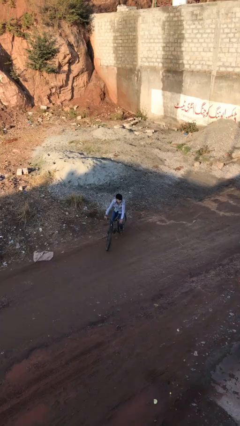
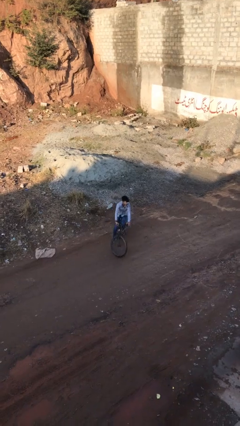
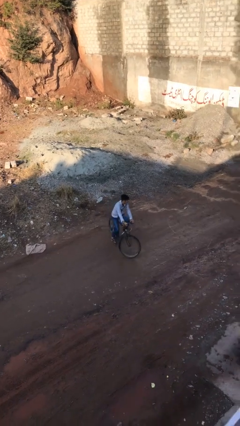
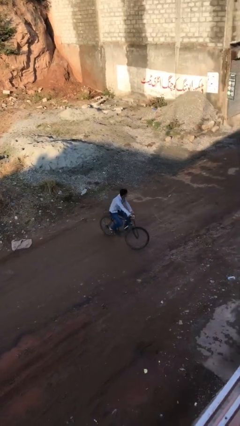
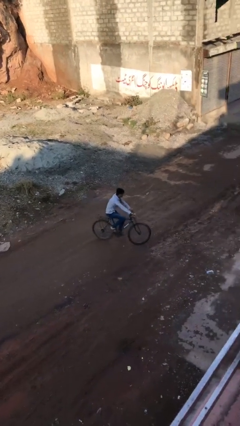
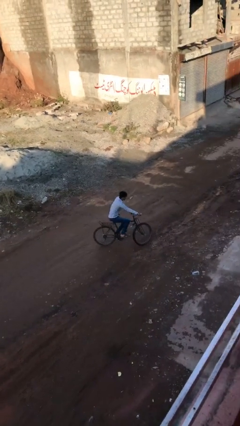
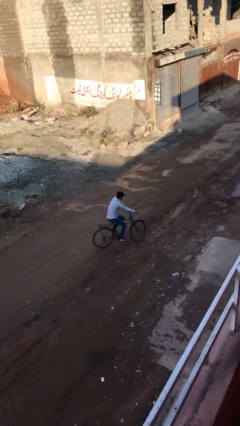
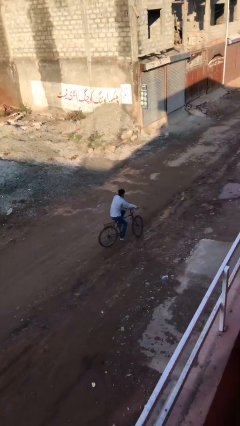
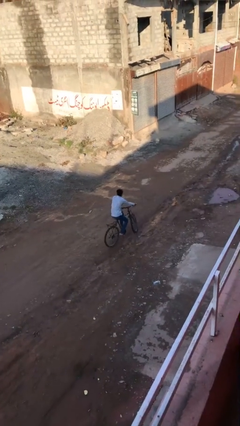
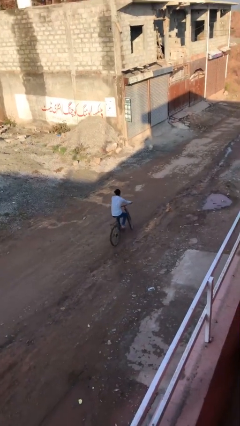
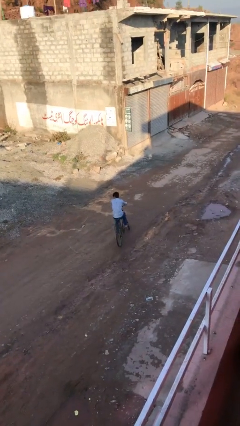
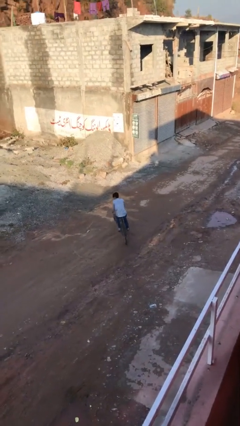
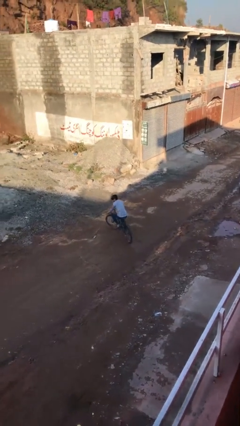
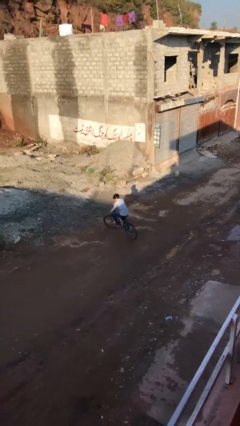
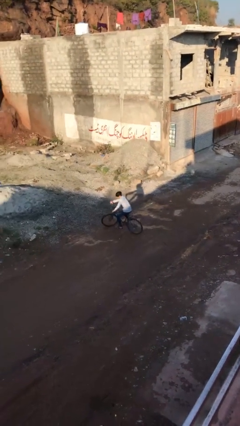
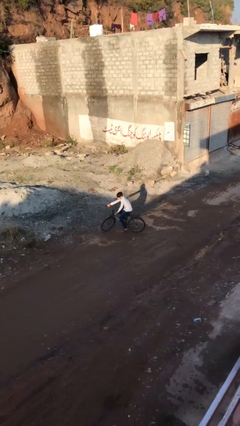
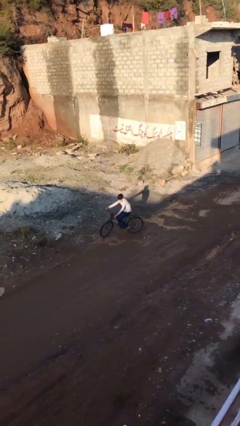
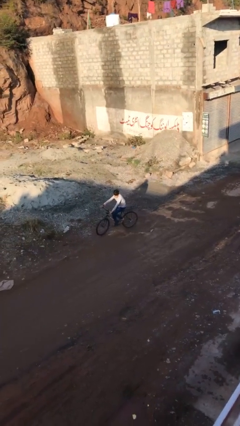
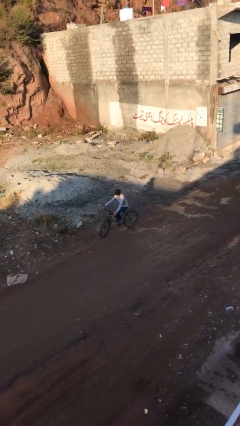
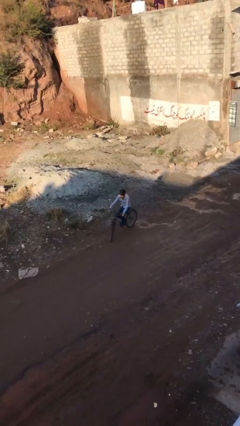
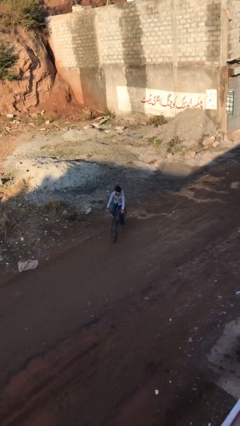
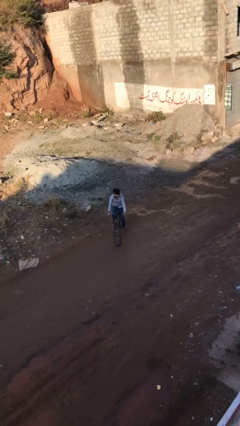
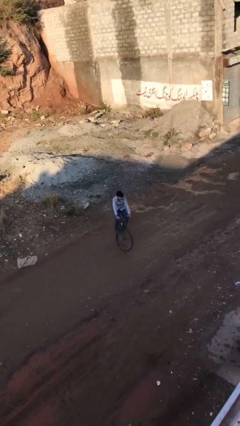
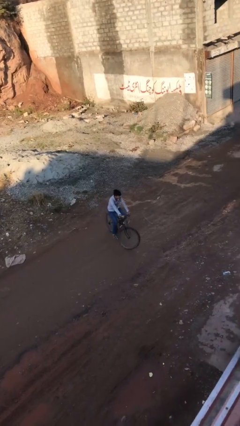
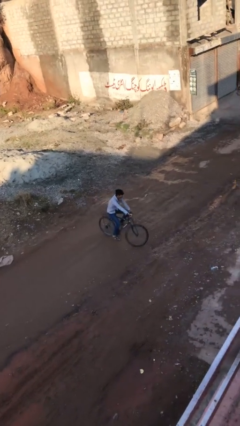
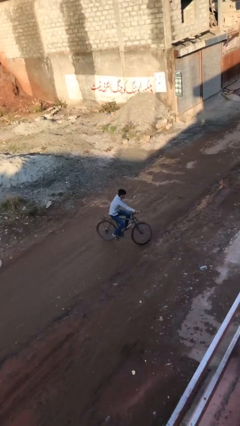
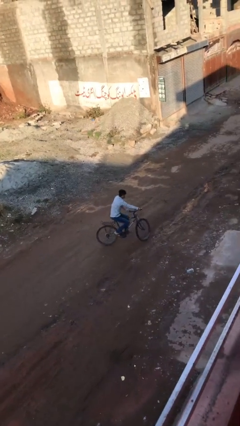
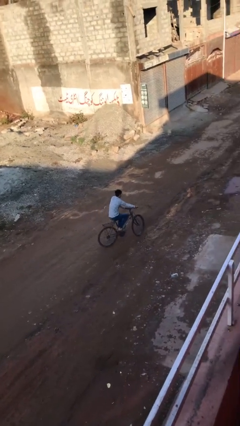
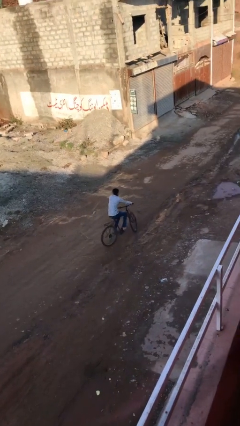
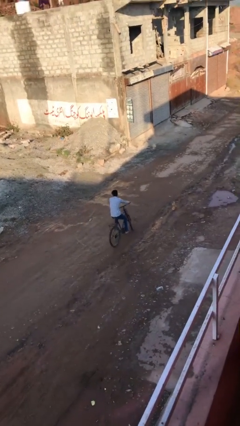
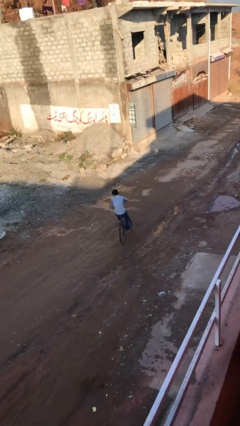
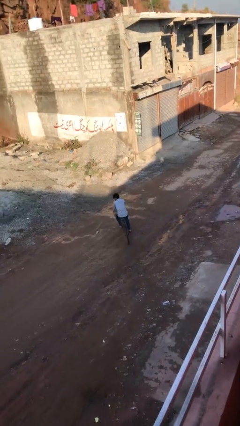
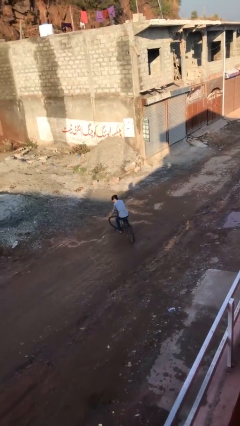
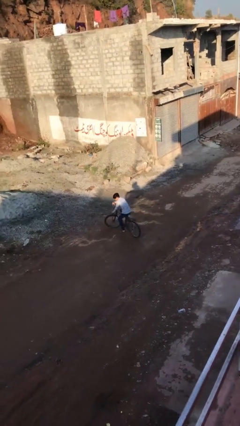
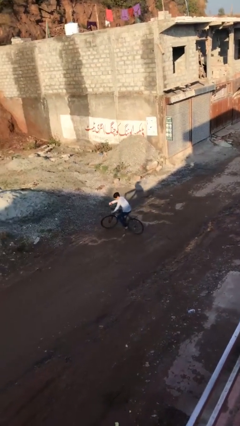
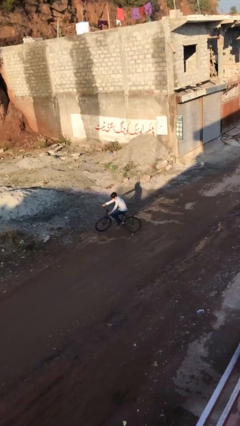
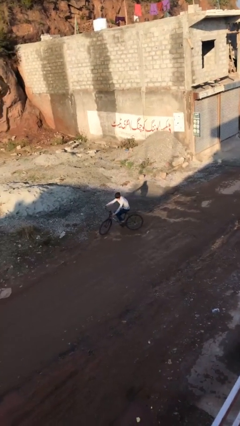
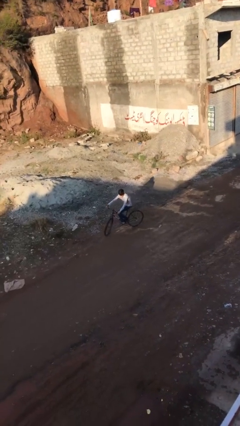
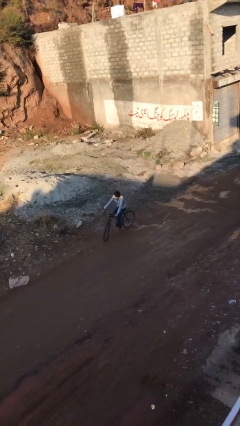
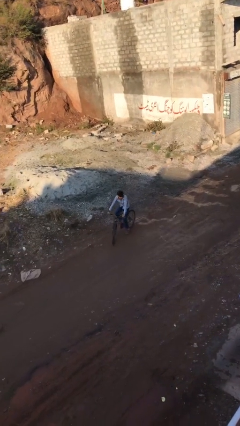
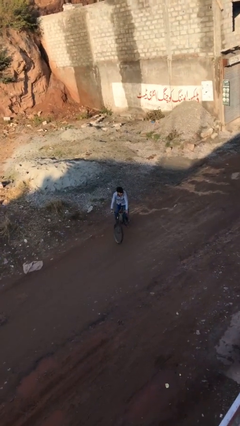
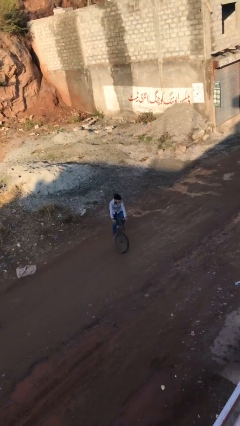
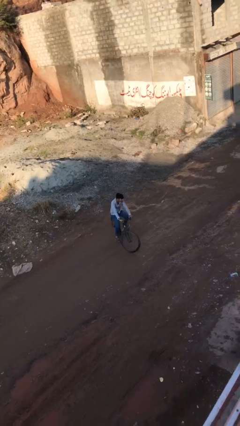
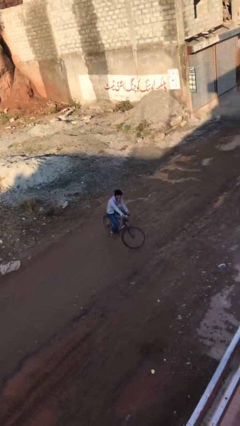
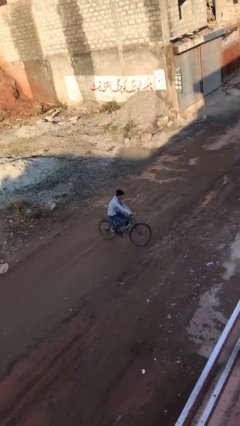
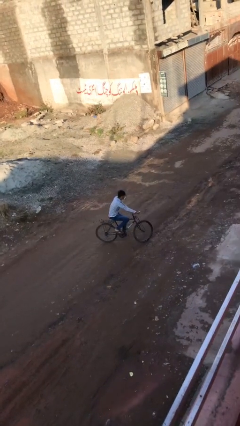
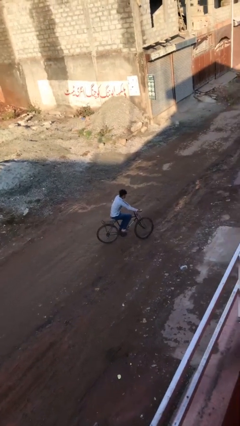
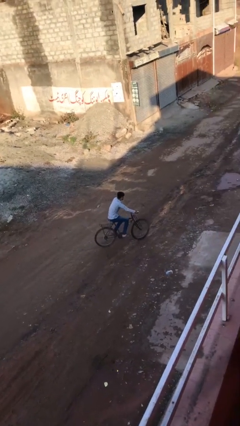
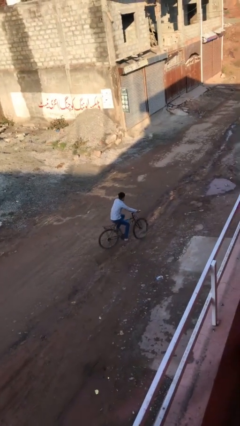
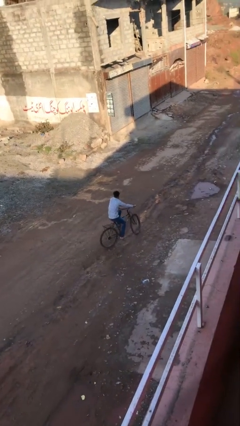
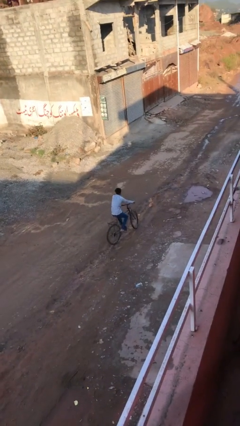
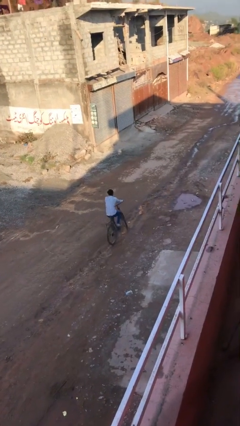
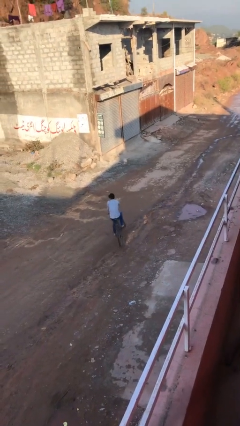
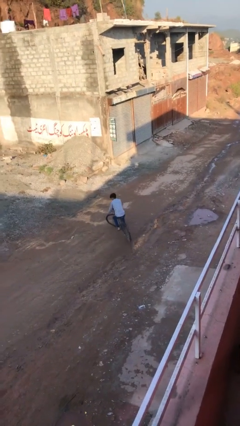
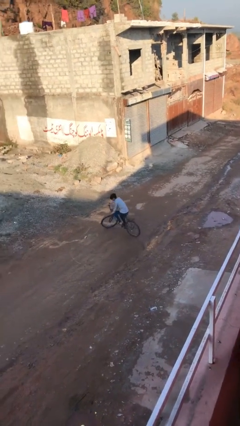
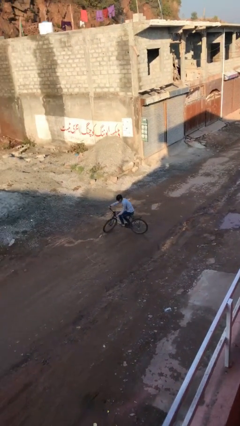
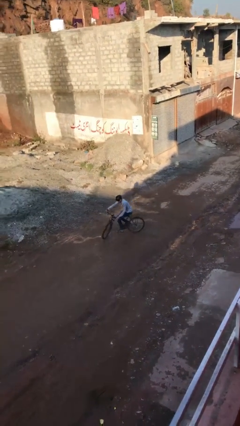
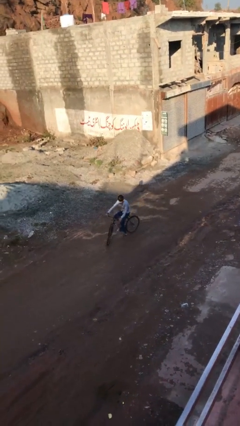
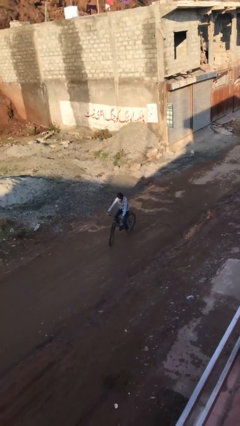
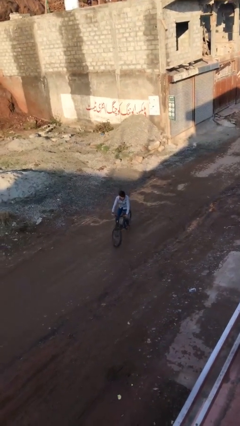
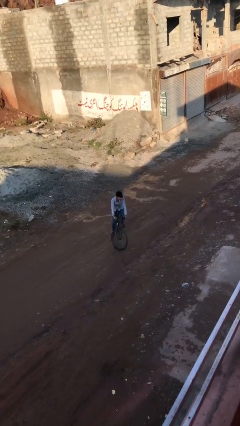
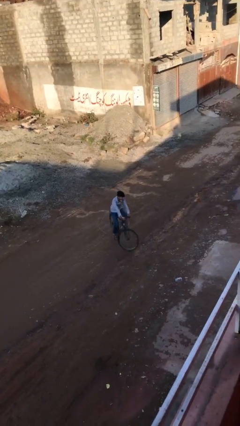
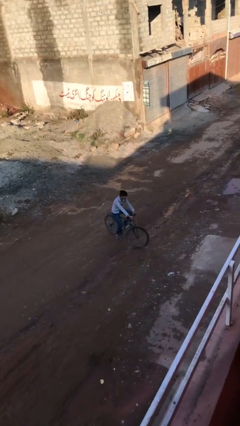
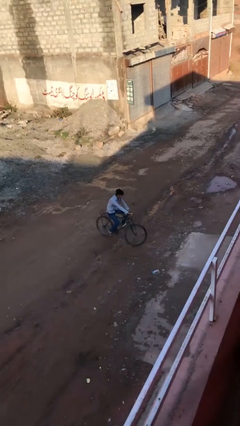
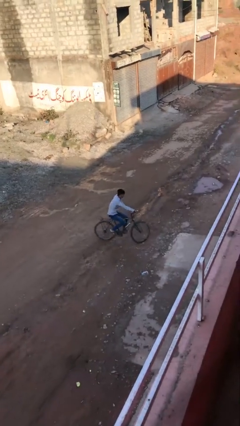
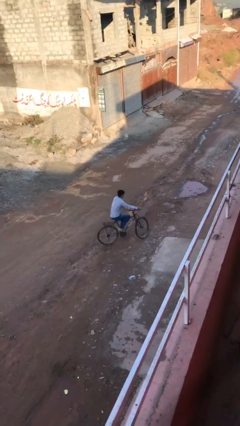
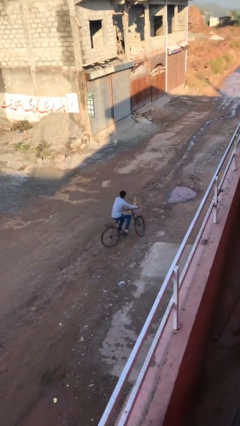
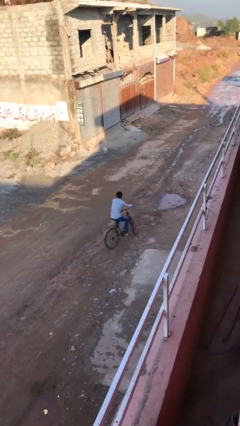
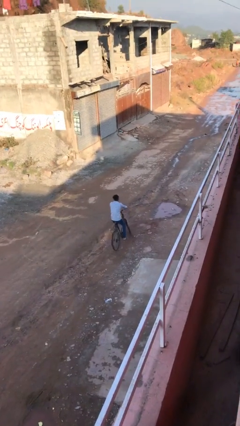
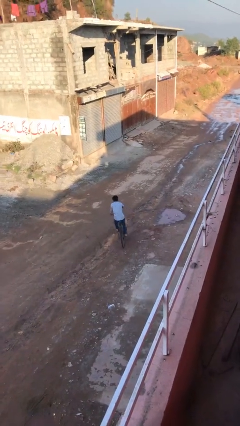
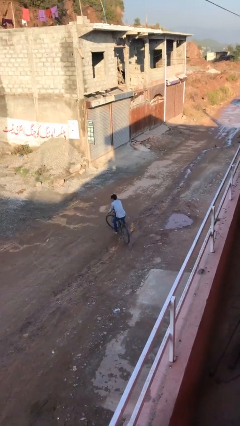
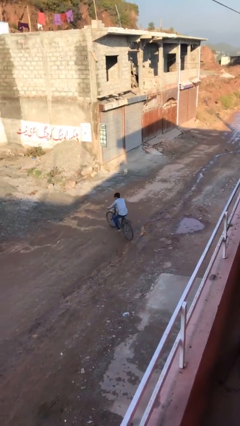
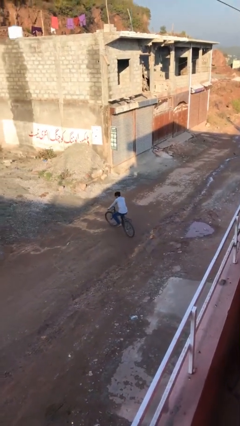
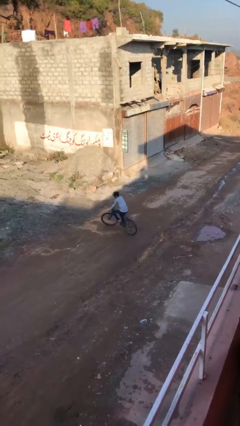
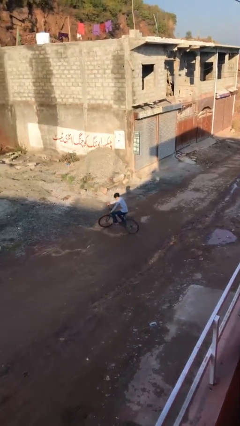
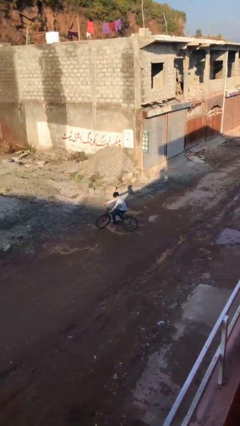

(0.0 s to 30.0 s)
person rides bicycle

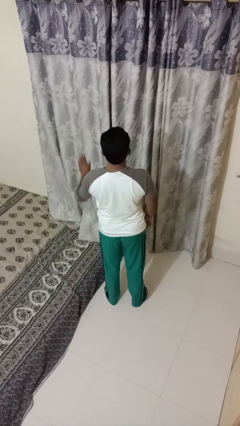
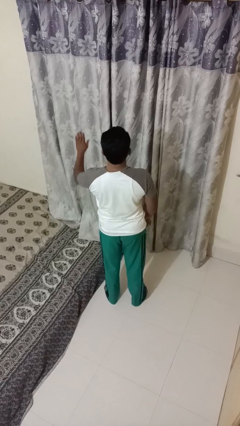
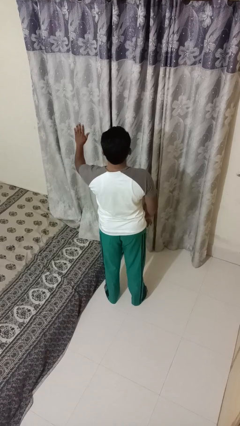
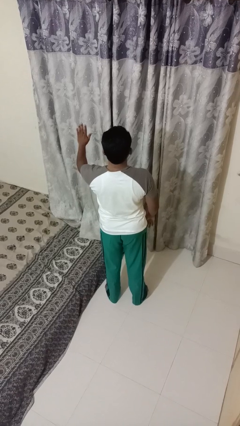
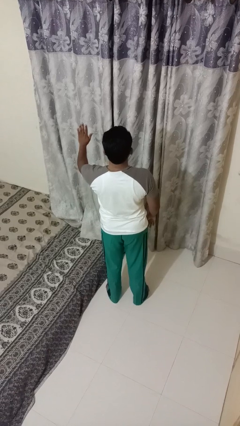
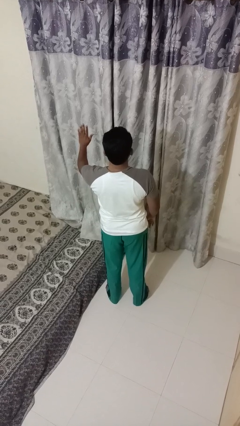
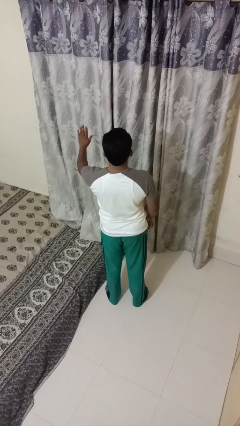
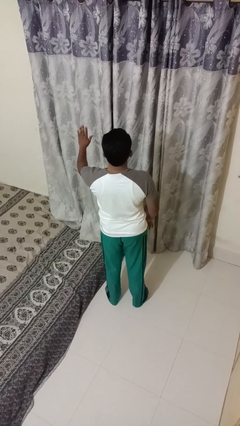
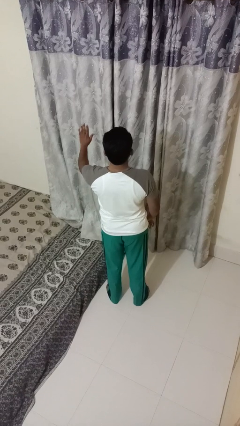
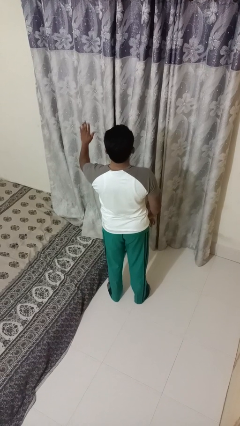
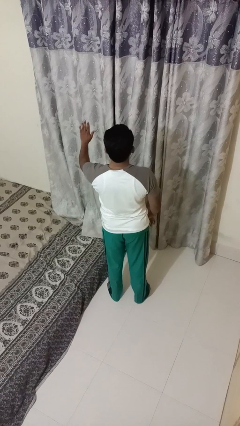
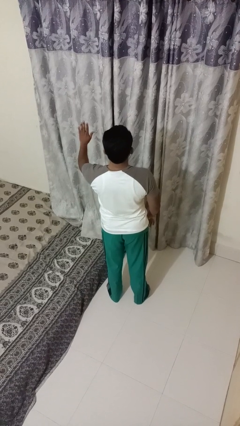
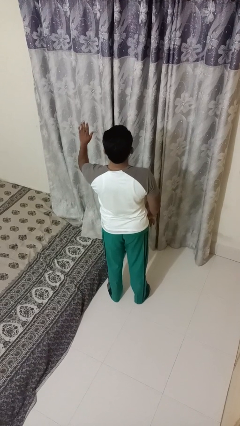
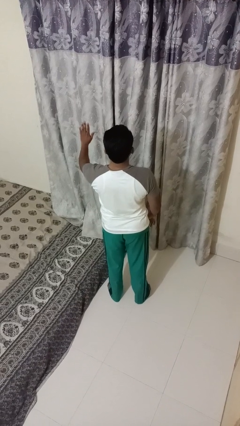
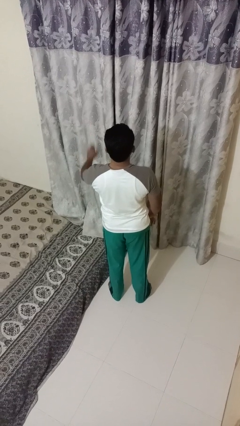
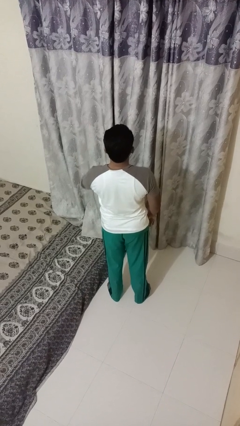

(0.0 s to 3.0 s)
person gestures stop
